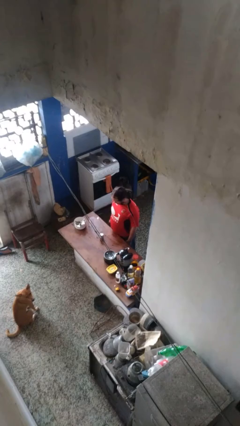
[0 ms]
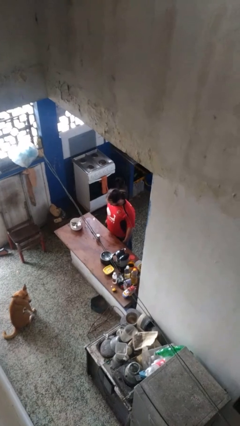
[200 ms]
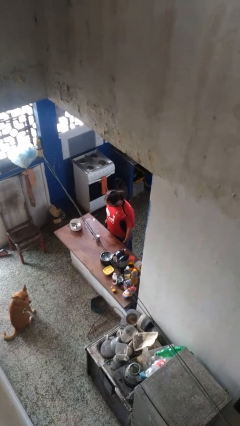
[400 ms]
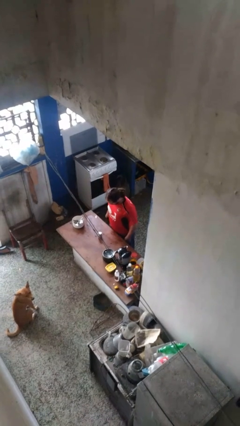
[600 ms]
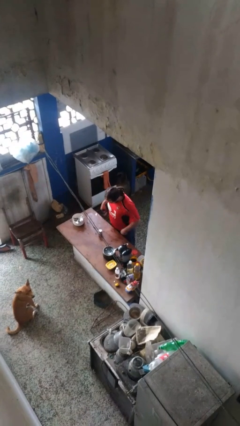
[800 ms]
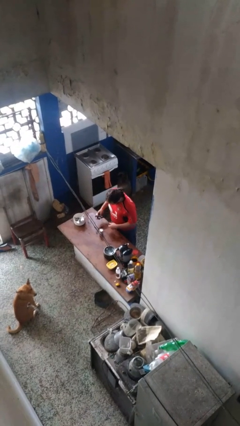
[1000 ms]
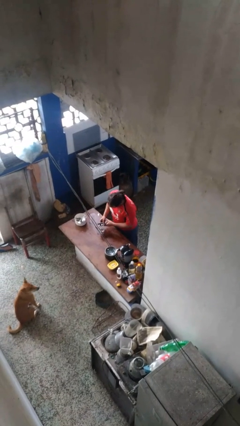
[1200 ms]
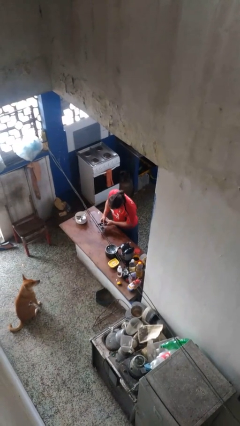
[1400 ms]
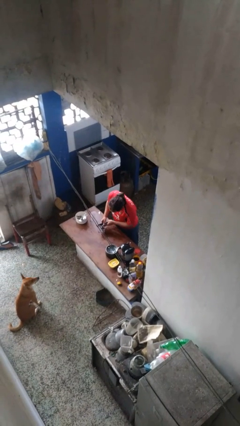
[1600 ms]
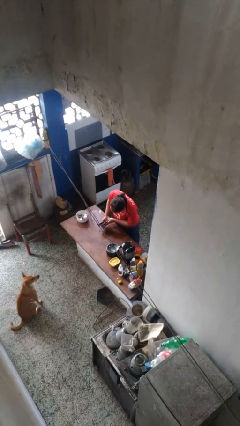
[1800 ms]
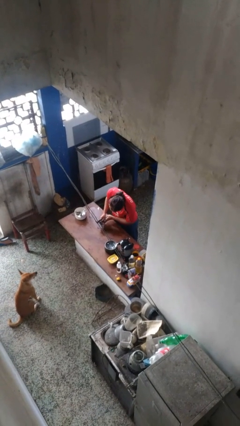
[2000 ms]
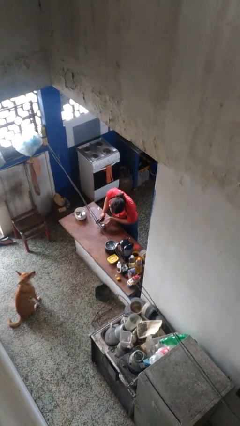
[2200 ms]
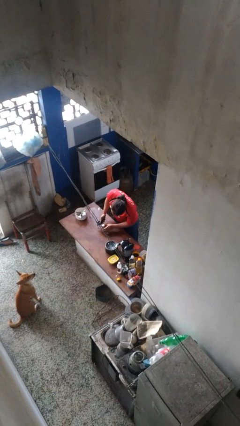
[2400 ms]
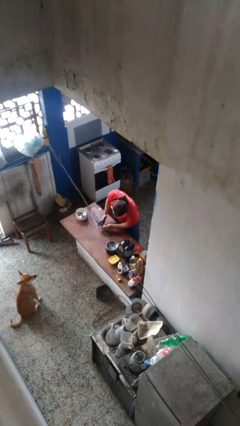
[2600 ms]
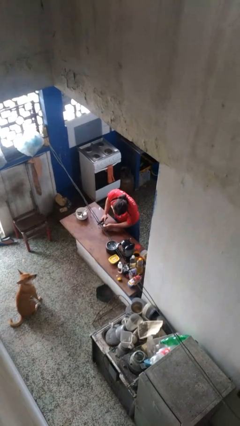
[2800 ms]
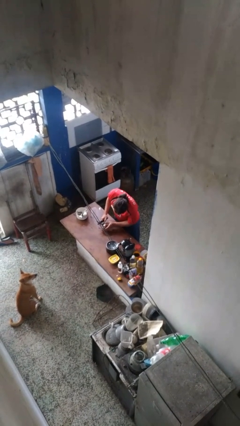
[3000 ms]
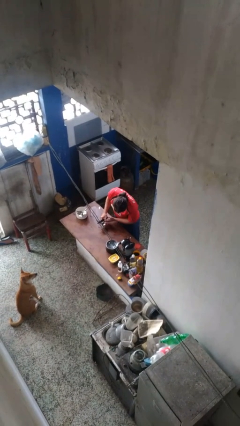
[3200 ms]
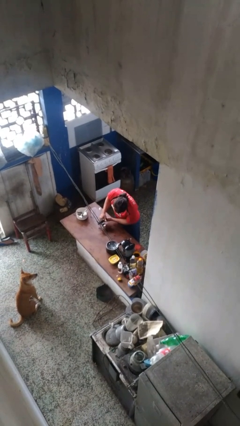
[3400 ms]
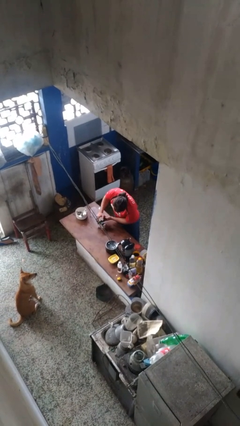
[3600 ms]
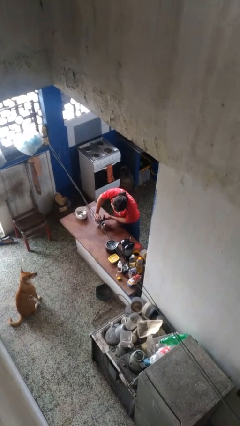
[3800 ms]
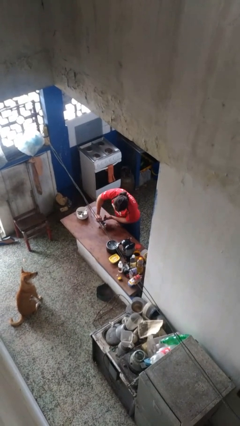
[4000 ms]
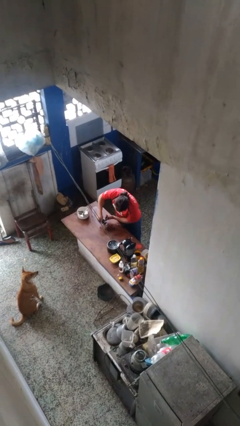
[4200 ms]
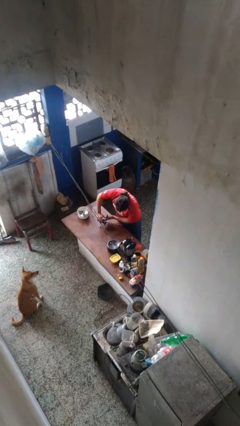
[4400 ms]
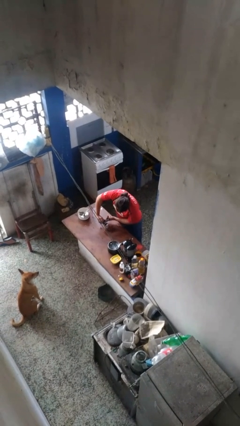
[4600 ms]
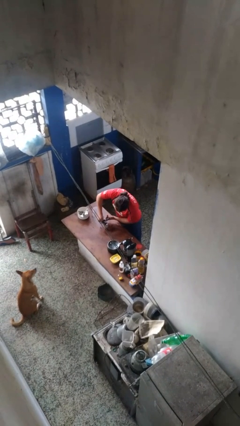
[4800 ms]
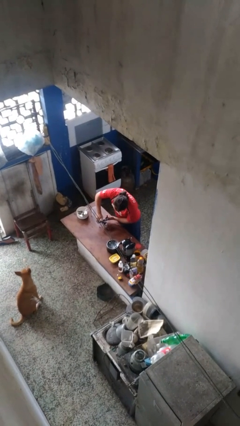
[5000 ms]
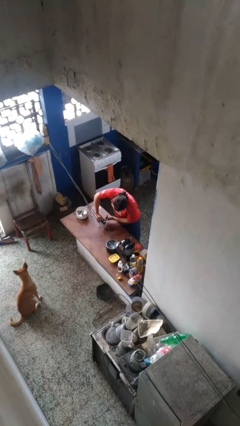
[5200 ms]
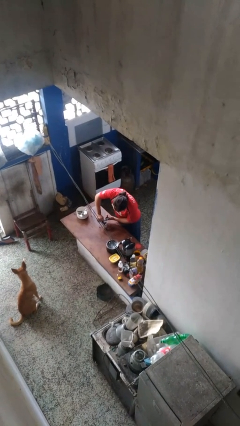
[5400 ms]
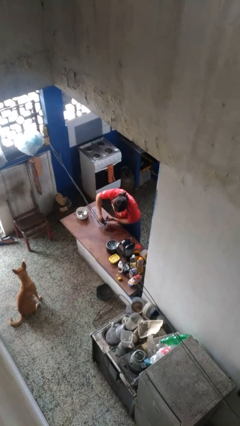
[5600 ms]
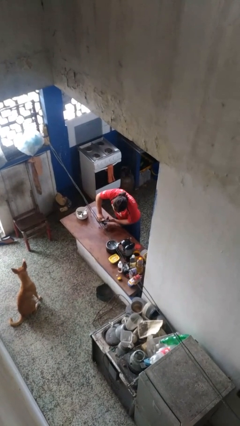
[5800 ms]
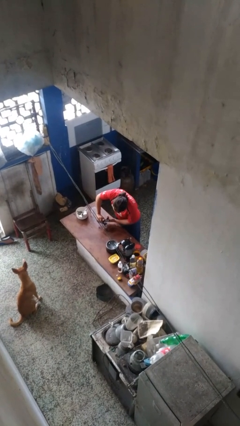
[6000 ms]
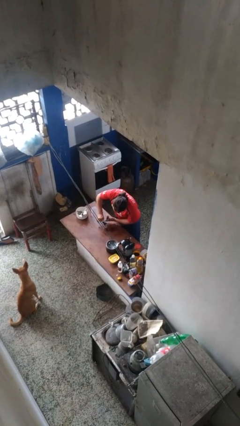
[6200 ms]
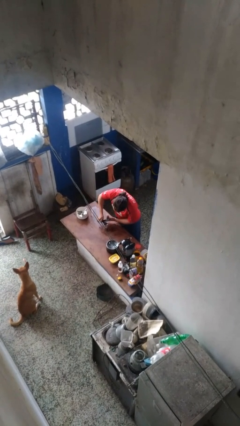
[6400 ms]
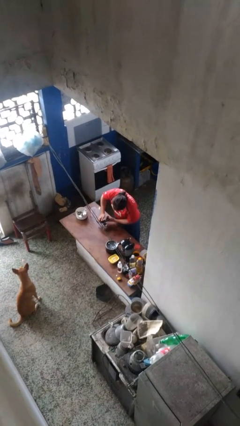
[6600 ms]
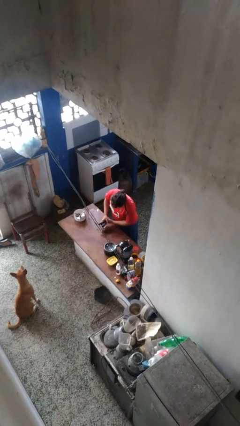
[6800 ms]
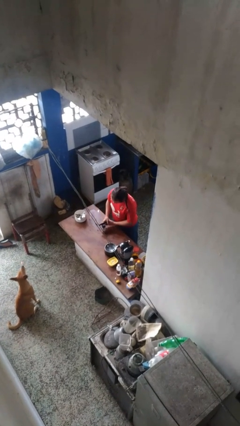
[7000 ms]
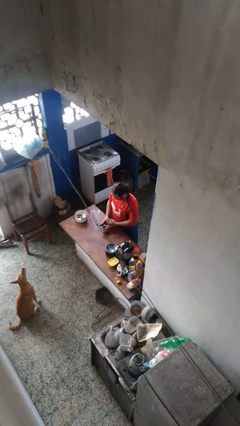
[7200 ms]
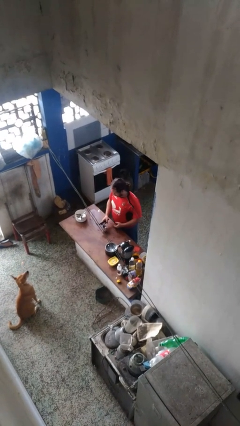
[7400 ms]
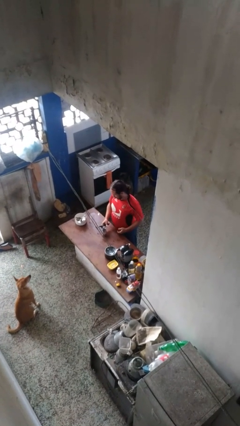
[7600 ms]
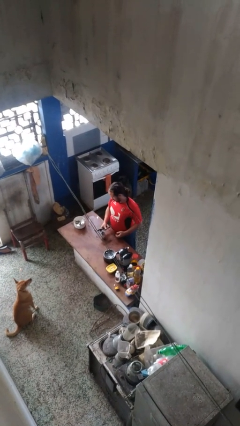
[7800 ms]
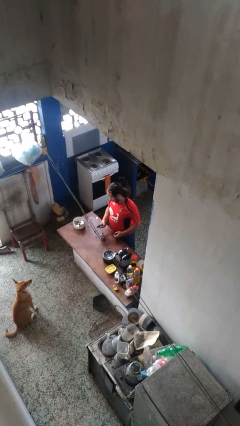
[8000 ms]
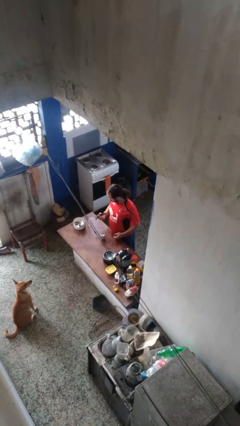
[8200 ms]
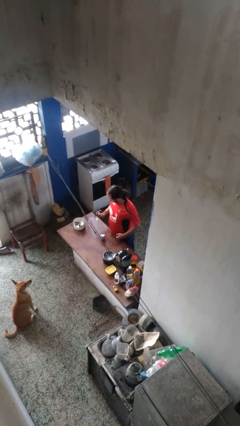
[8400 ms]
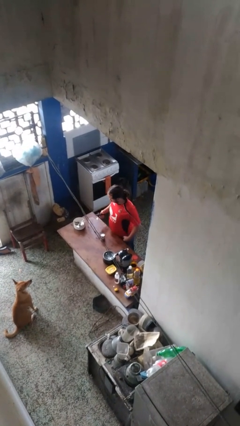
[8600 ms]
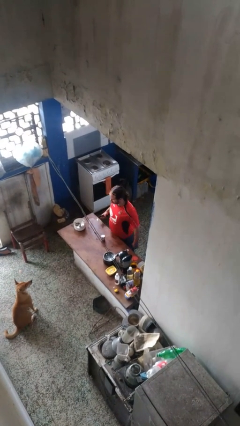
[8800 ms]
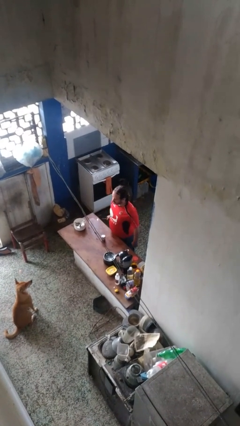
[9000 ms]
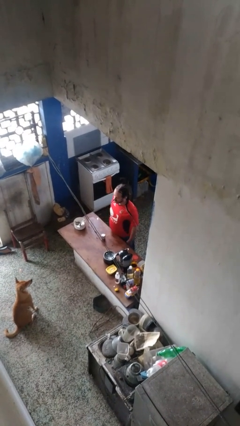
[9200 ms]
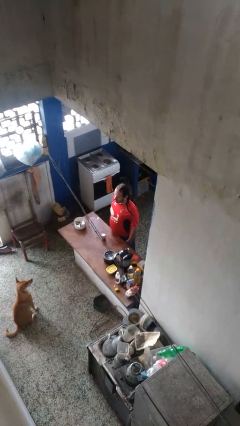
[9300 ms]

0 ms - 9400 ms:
person opens can with can opener

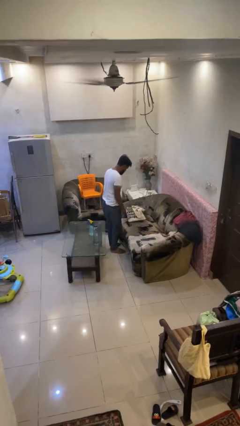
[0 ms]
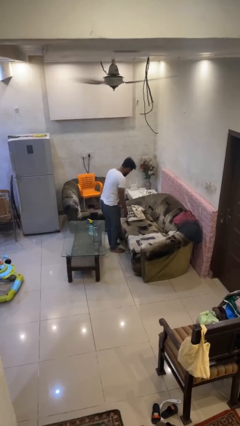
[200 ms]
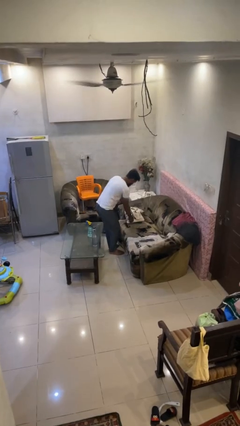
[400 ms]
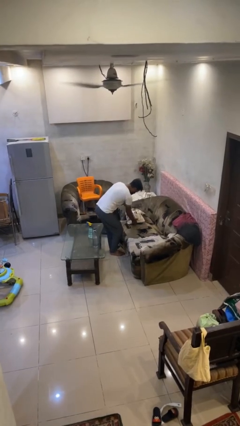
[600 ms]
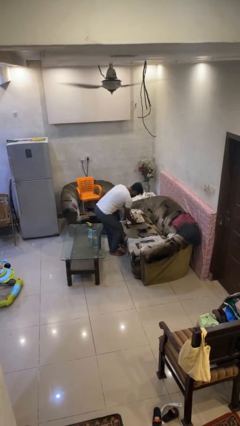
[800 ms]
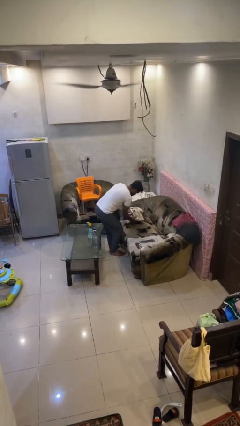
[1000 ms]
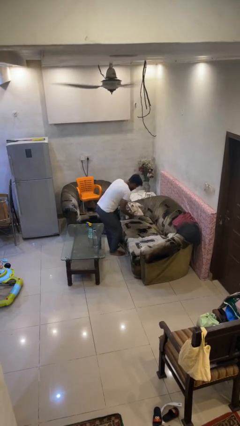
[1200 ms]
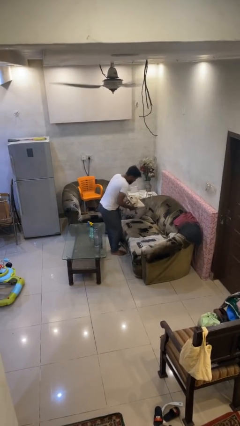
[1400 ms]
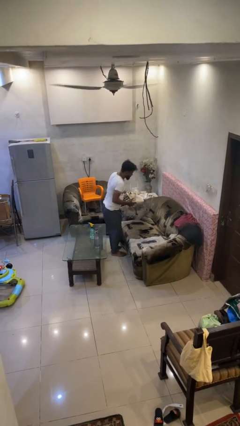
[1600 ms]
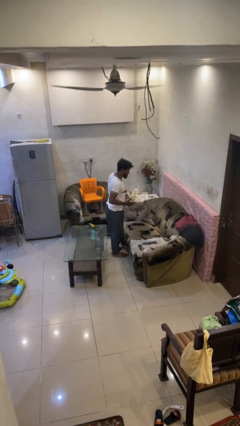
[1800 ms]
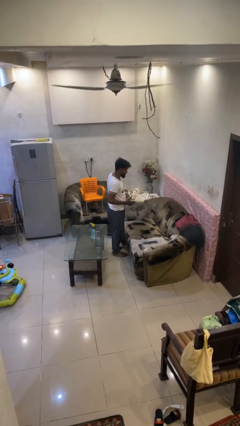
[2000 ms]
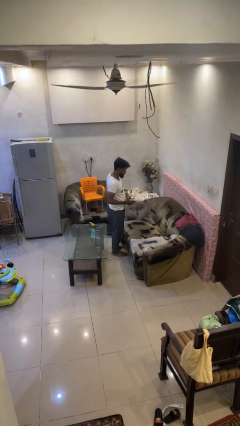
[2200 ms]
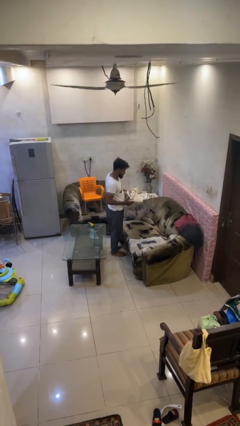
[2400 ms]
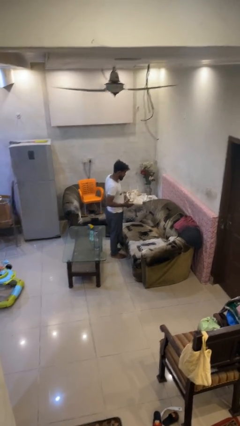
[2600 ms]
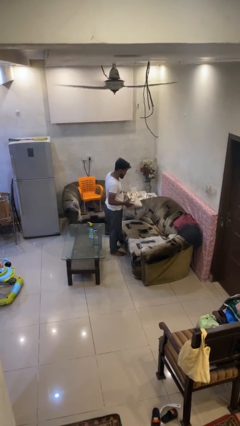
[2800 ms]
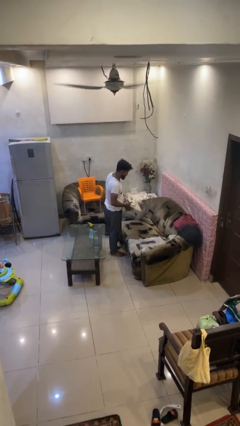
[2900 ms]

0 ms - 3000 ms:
person picks up object from couch

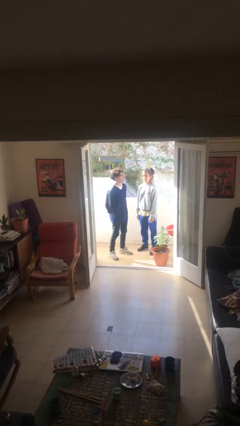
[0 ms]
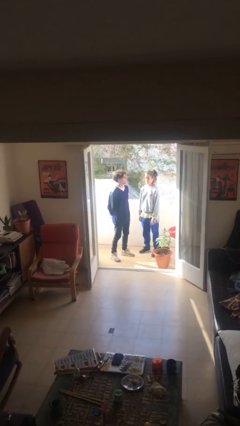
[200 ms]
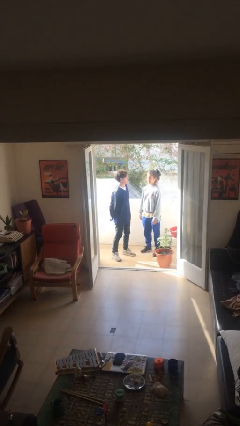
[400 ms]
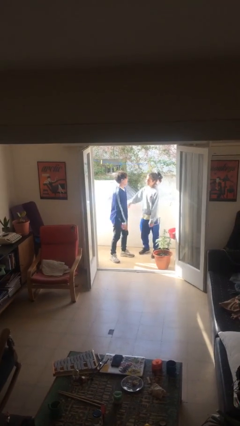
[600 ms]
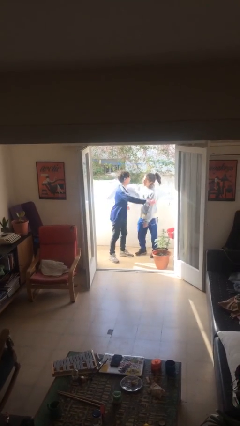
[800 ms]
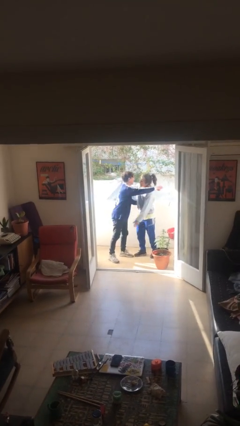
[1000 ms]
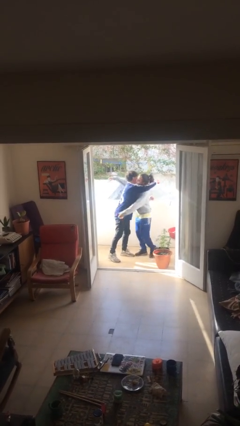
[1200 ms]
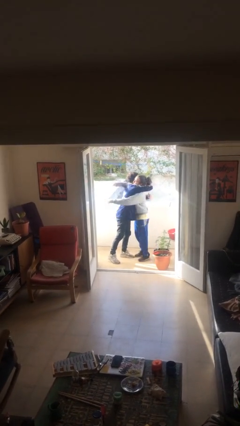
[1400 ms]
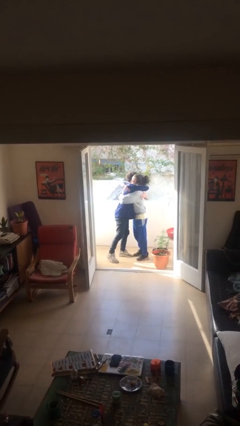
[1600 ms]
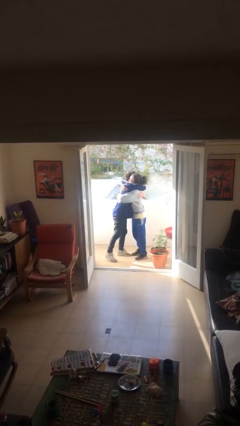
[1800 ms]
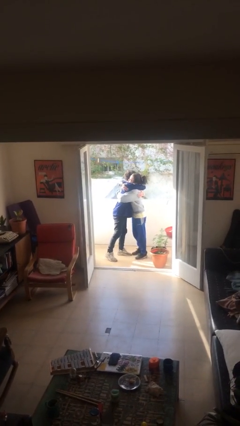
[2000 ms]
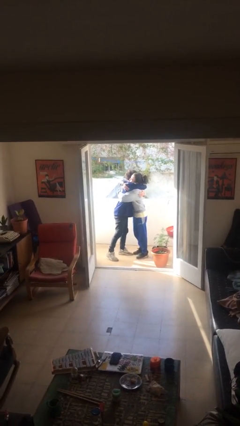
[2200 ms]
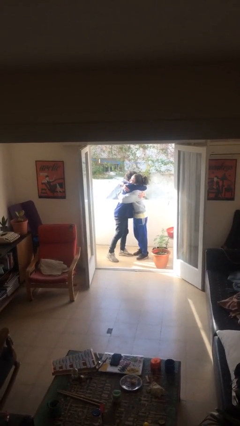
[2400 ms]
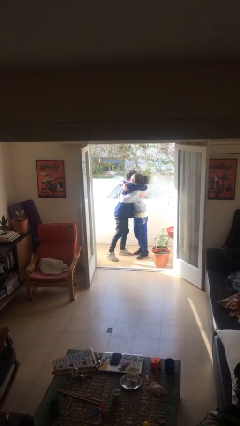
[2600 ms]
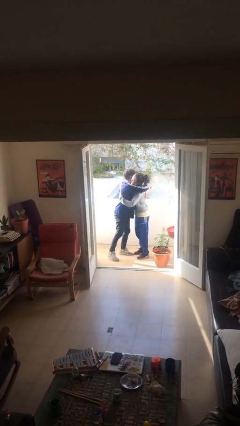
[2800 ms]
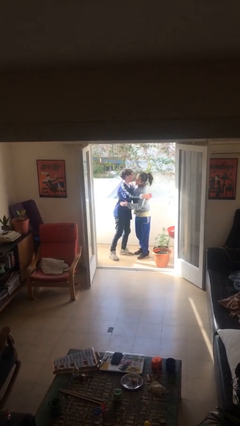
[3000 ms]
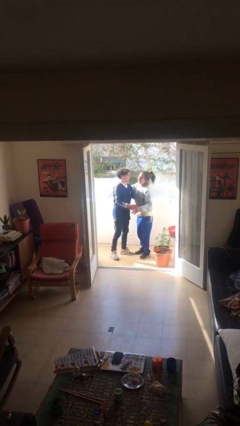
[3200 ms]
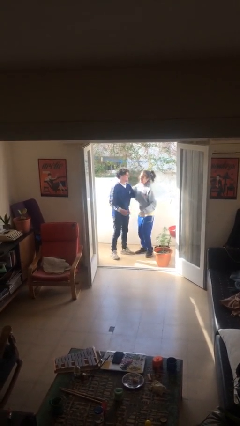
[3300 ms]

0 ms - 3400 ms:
person embraces person

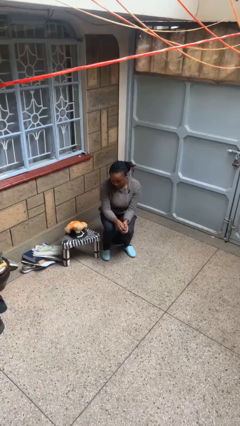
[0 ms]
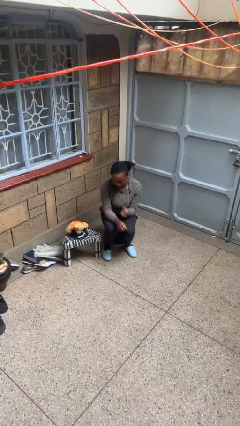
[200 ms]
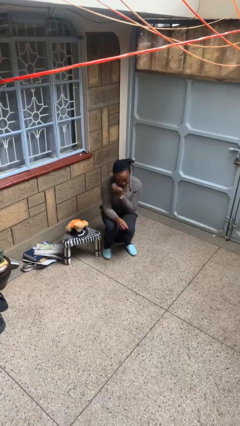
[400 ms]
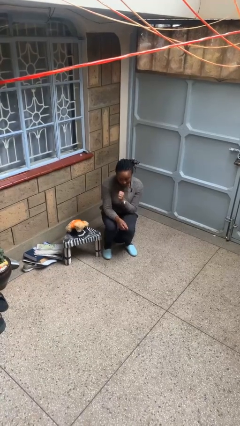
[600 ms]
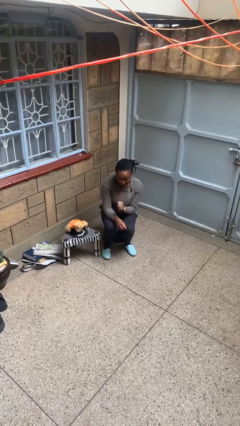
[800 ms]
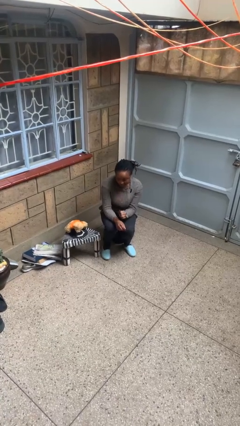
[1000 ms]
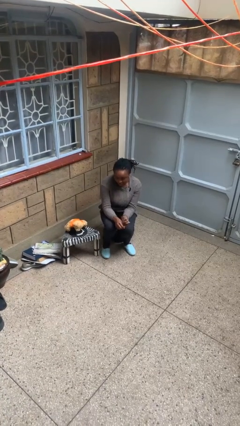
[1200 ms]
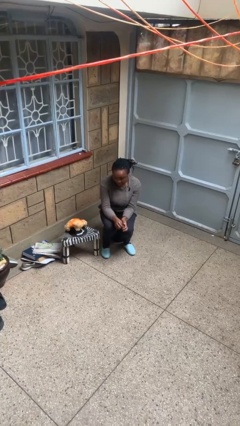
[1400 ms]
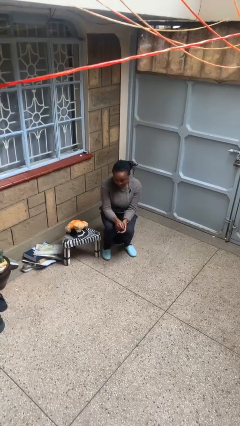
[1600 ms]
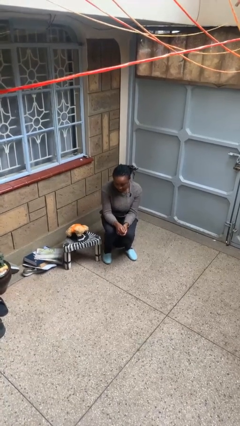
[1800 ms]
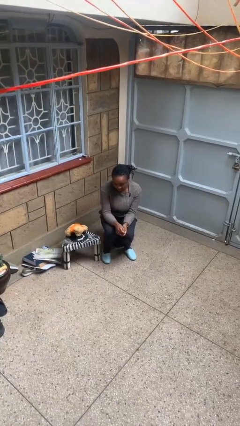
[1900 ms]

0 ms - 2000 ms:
person swats bug
